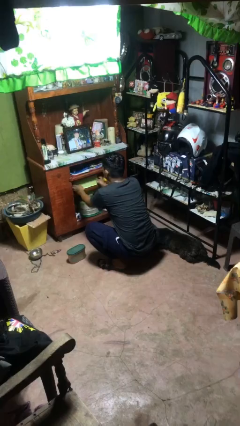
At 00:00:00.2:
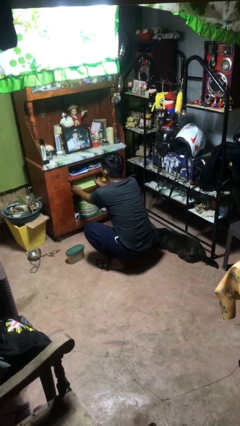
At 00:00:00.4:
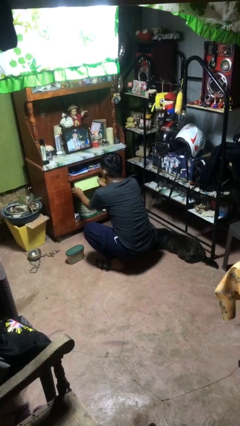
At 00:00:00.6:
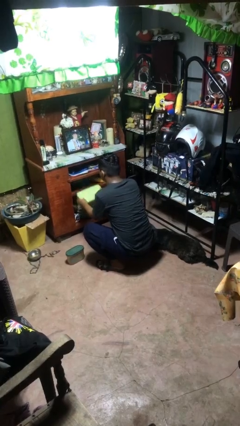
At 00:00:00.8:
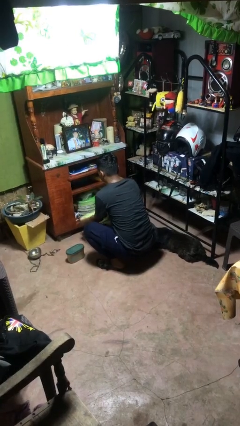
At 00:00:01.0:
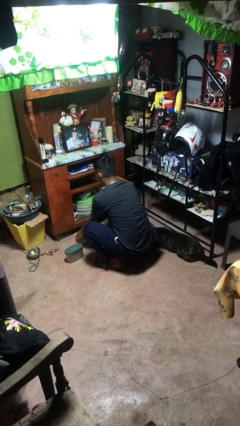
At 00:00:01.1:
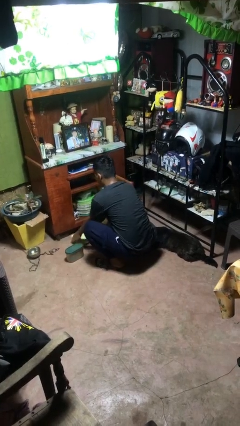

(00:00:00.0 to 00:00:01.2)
person takes object from cabinet

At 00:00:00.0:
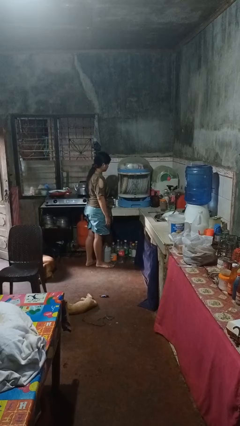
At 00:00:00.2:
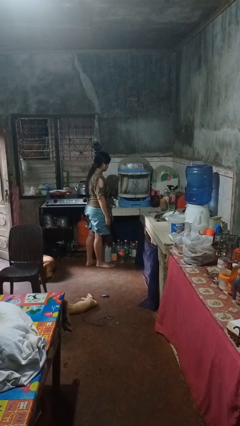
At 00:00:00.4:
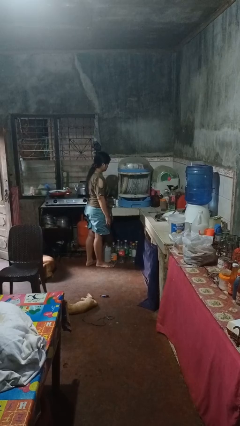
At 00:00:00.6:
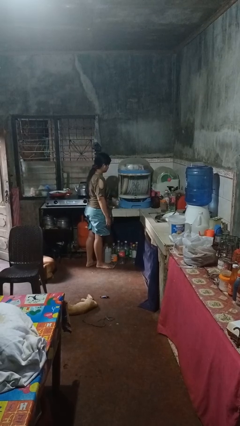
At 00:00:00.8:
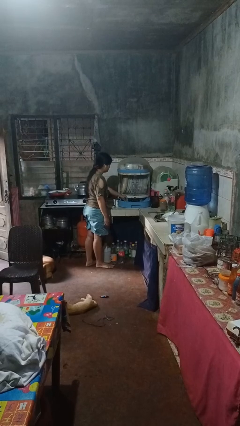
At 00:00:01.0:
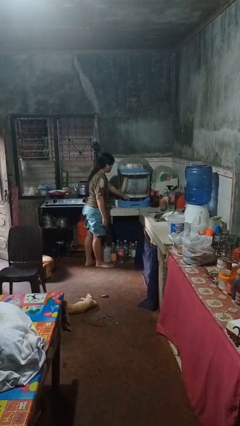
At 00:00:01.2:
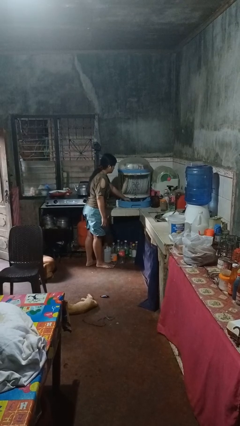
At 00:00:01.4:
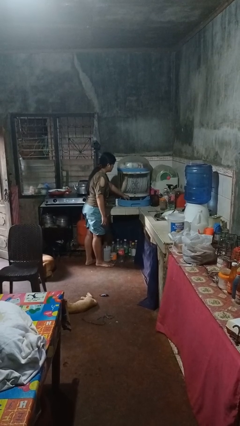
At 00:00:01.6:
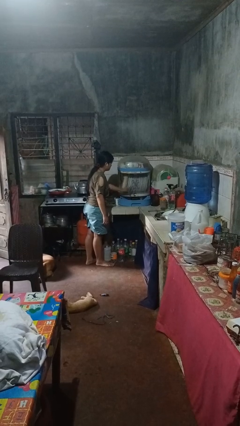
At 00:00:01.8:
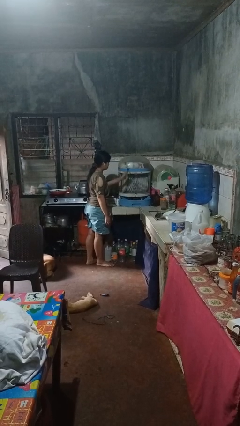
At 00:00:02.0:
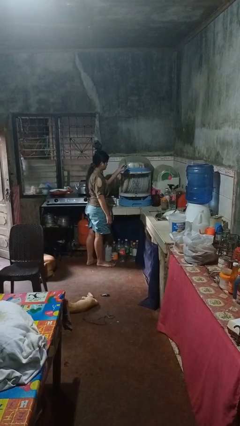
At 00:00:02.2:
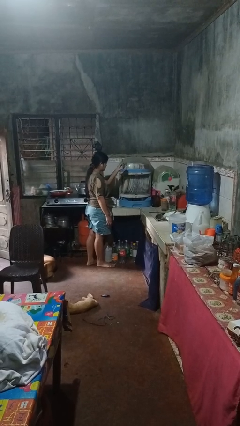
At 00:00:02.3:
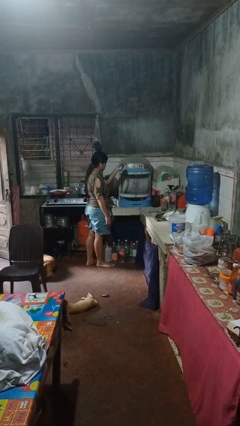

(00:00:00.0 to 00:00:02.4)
person takes object from kitchen drawer

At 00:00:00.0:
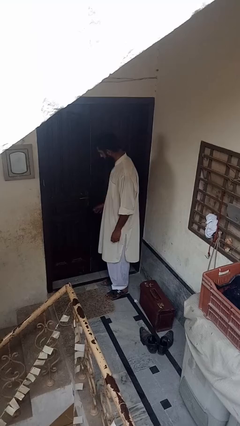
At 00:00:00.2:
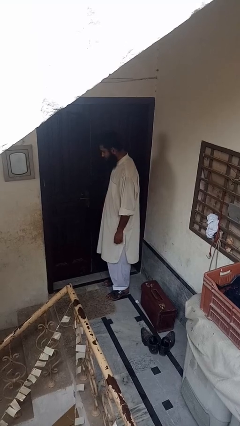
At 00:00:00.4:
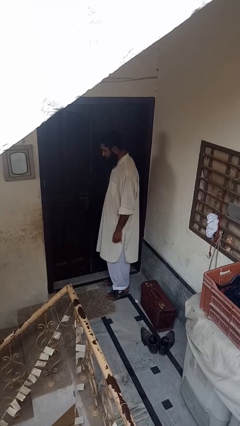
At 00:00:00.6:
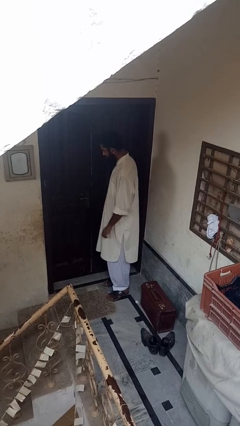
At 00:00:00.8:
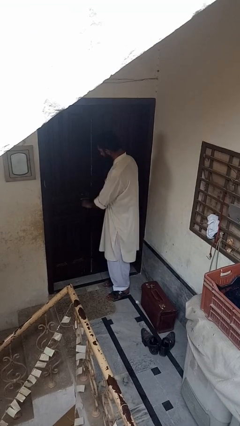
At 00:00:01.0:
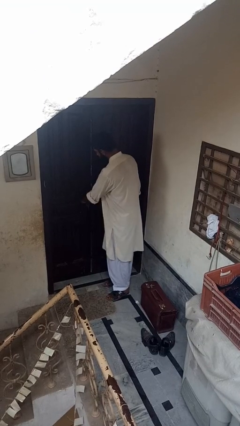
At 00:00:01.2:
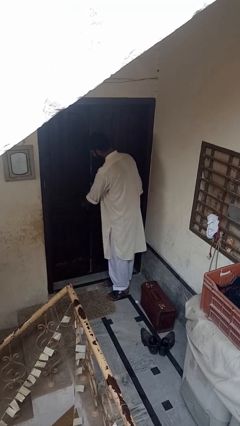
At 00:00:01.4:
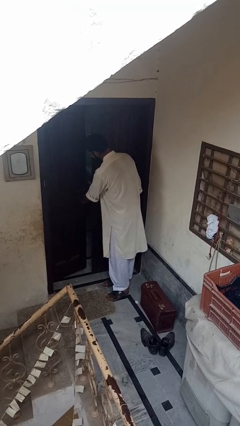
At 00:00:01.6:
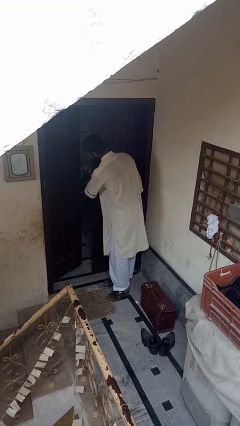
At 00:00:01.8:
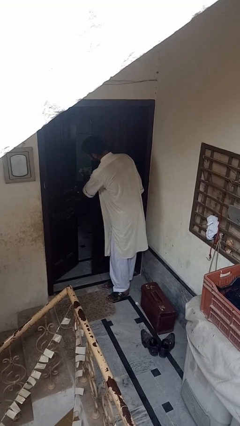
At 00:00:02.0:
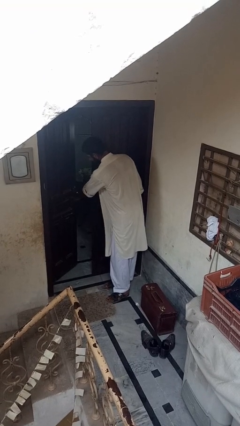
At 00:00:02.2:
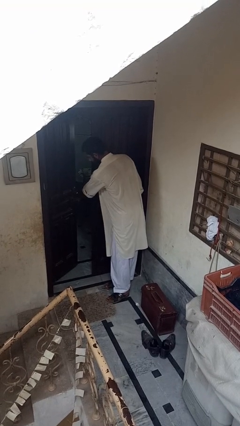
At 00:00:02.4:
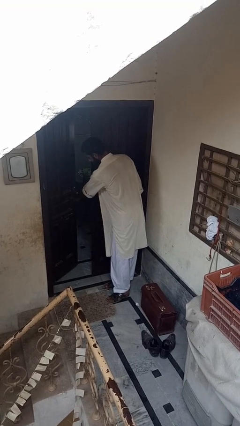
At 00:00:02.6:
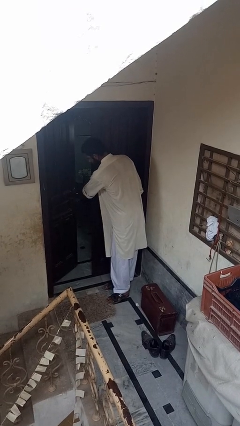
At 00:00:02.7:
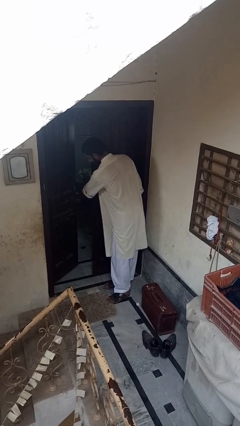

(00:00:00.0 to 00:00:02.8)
person opens facility door

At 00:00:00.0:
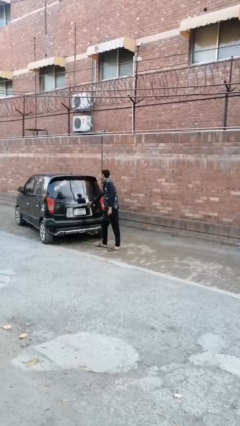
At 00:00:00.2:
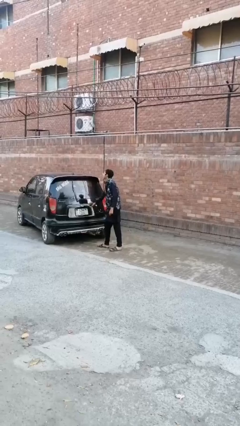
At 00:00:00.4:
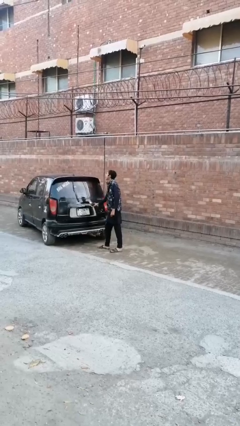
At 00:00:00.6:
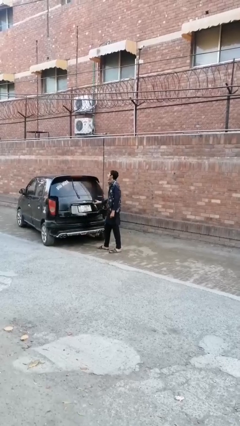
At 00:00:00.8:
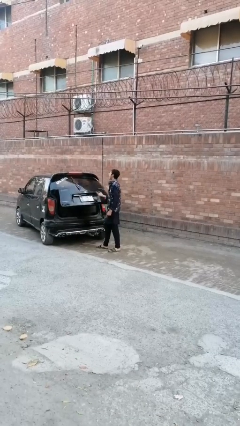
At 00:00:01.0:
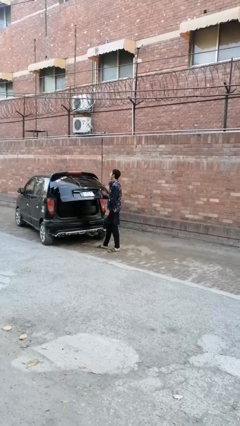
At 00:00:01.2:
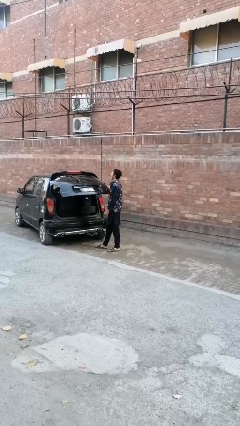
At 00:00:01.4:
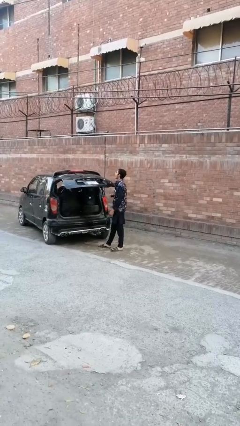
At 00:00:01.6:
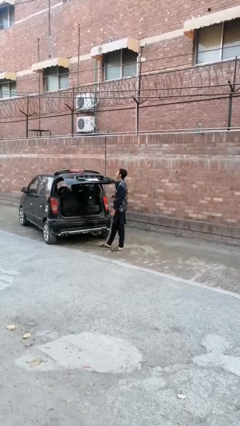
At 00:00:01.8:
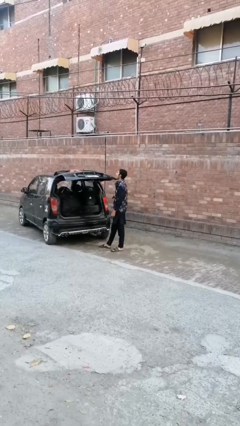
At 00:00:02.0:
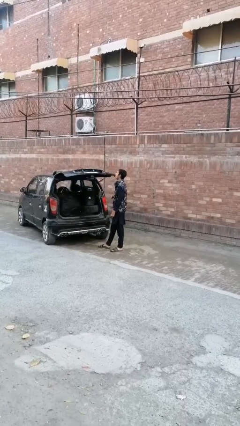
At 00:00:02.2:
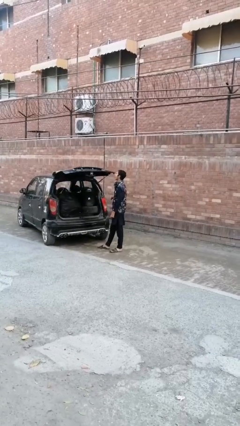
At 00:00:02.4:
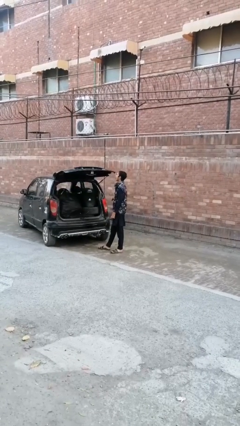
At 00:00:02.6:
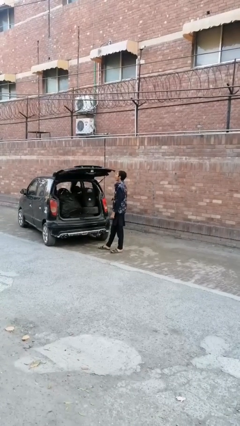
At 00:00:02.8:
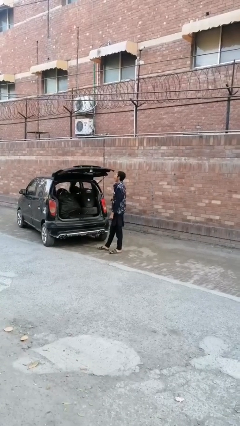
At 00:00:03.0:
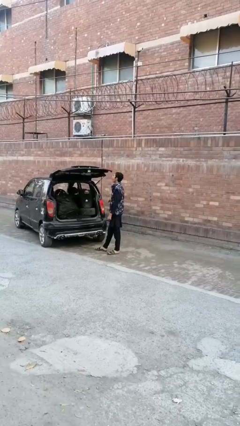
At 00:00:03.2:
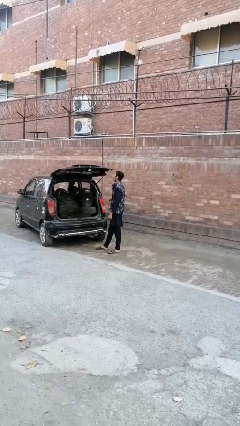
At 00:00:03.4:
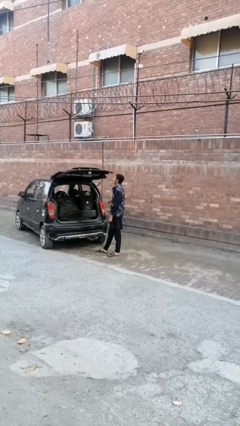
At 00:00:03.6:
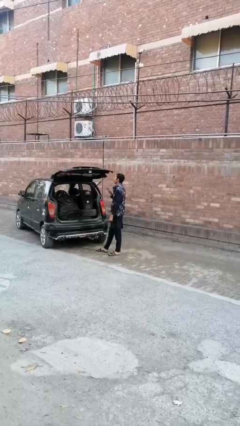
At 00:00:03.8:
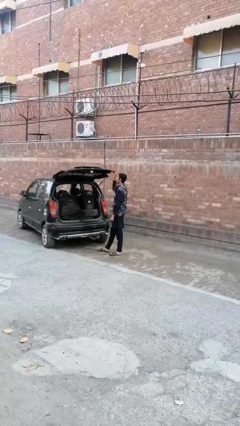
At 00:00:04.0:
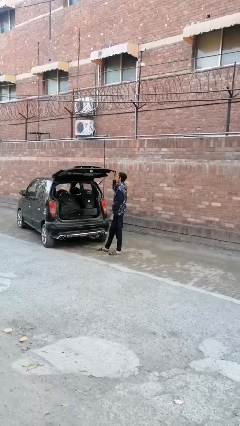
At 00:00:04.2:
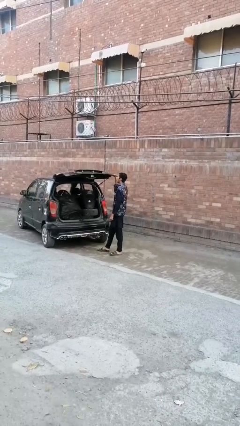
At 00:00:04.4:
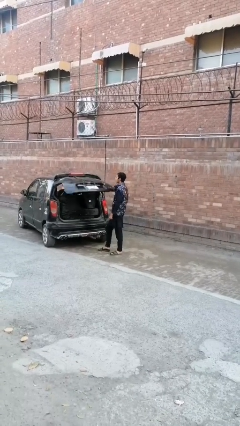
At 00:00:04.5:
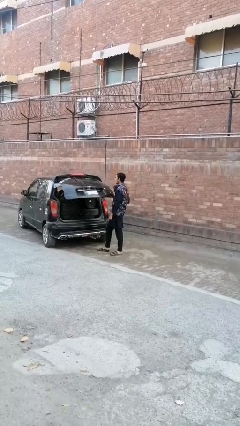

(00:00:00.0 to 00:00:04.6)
person opens car trunk

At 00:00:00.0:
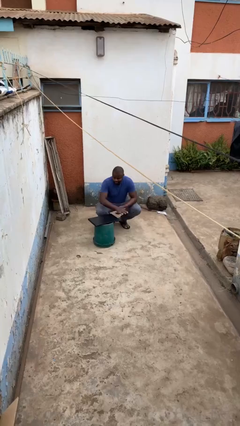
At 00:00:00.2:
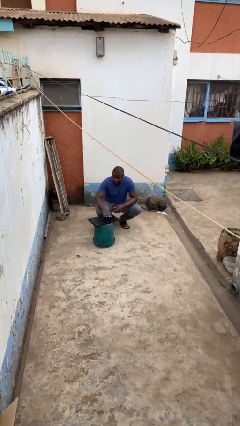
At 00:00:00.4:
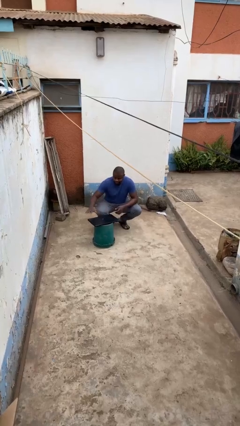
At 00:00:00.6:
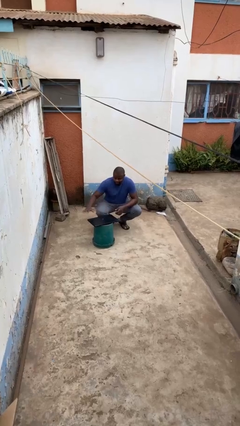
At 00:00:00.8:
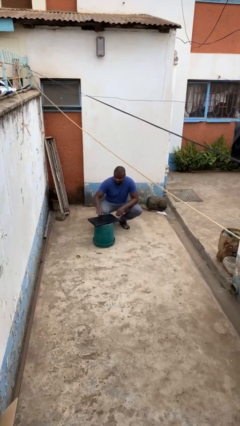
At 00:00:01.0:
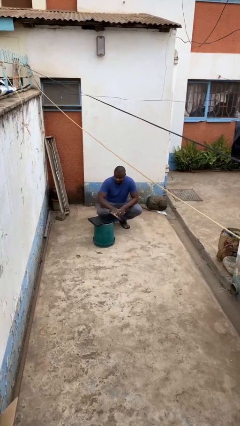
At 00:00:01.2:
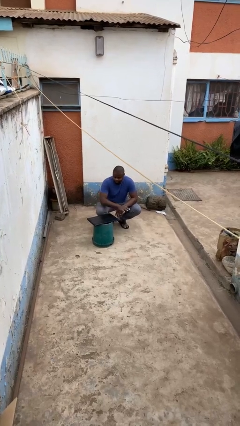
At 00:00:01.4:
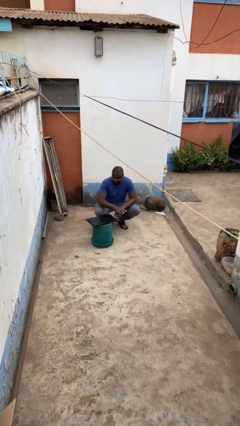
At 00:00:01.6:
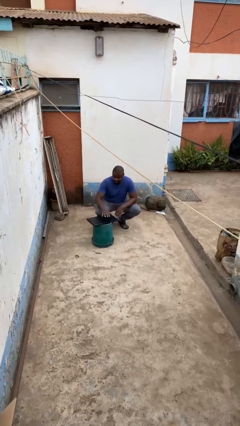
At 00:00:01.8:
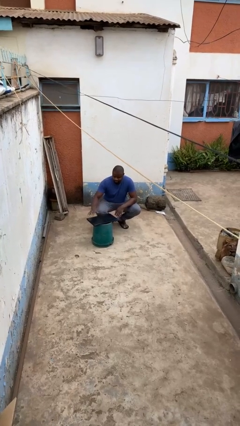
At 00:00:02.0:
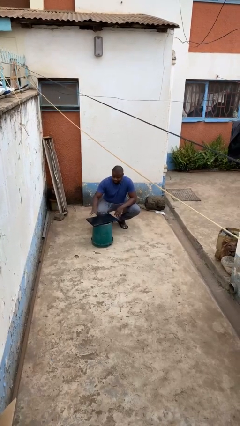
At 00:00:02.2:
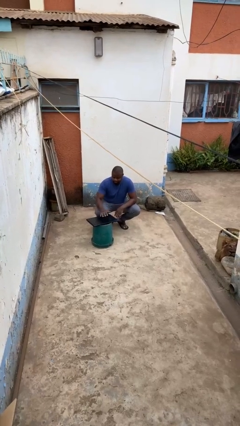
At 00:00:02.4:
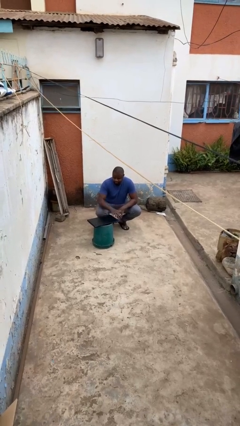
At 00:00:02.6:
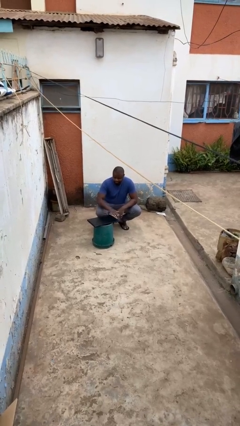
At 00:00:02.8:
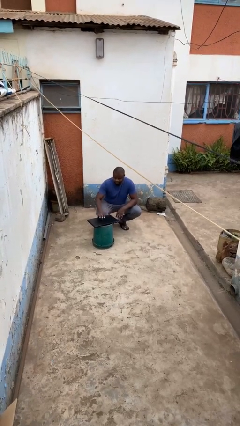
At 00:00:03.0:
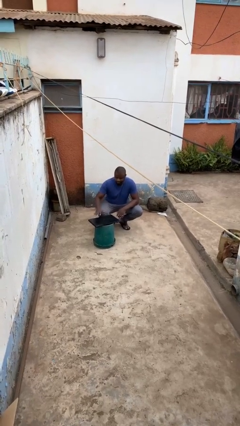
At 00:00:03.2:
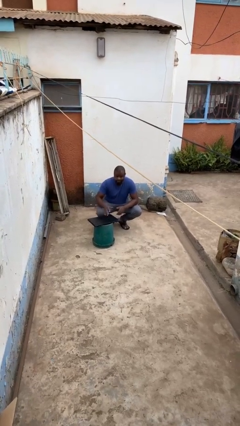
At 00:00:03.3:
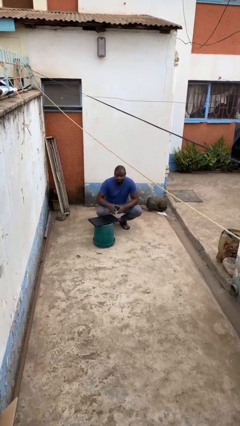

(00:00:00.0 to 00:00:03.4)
person waves hand over object

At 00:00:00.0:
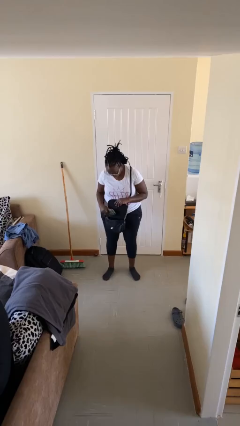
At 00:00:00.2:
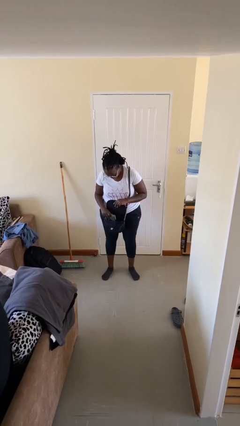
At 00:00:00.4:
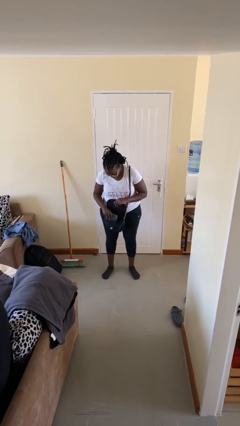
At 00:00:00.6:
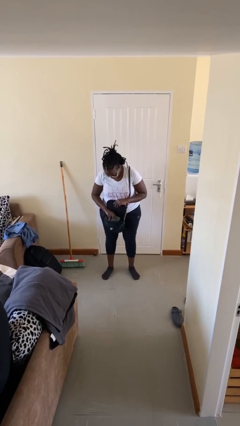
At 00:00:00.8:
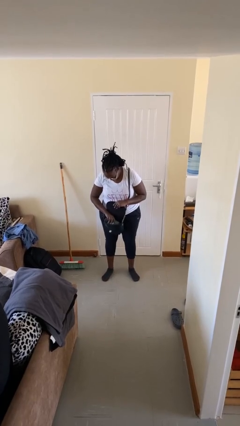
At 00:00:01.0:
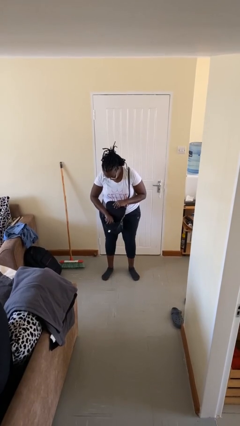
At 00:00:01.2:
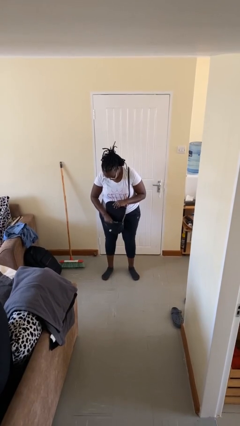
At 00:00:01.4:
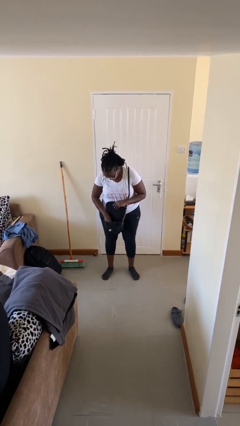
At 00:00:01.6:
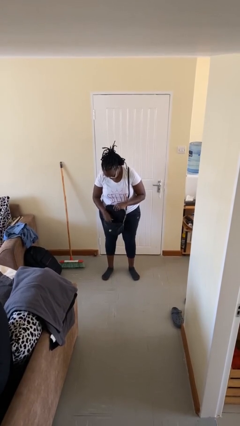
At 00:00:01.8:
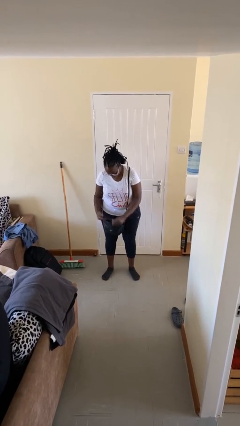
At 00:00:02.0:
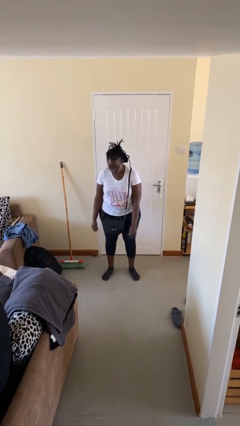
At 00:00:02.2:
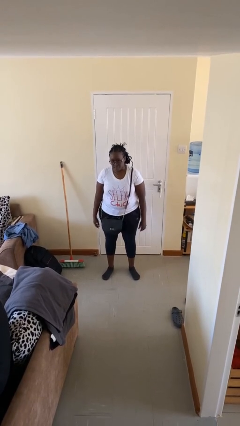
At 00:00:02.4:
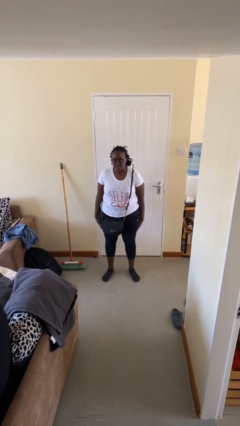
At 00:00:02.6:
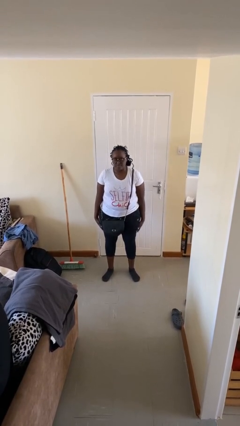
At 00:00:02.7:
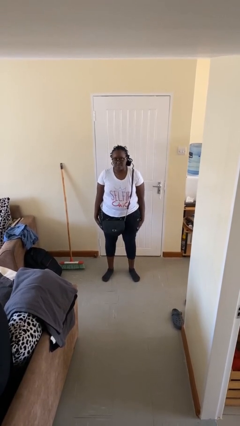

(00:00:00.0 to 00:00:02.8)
person puts object into purse
